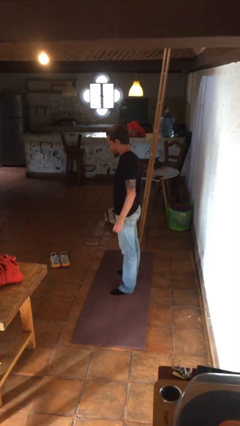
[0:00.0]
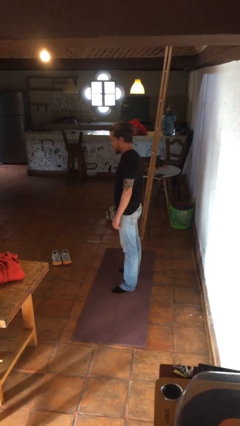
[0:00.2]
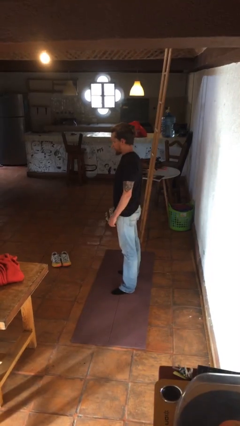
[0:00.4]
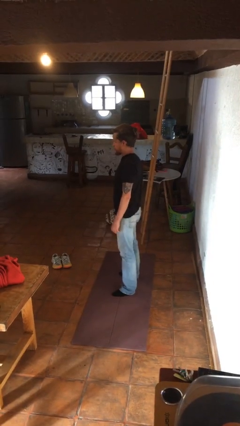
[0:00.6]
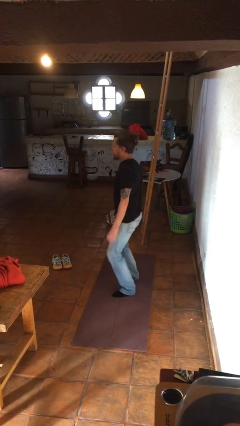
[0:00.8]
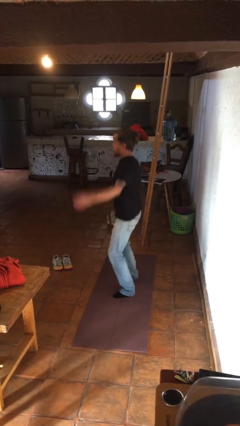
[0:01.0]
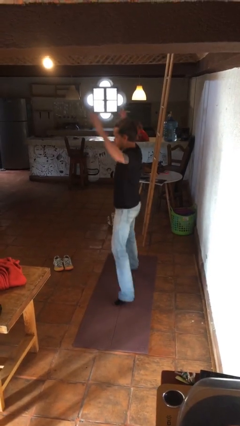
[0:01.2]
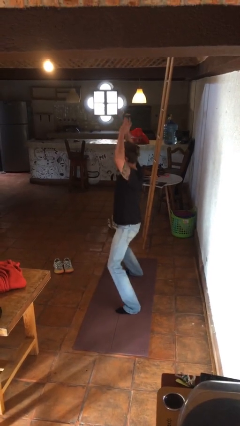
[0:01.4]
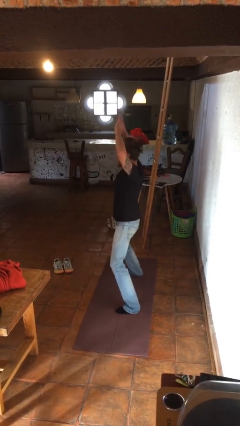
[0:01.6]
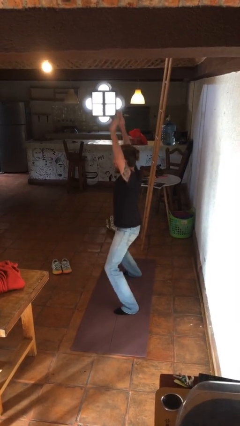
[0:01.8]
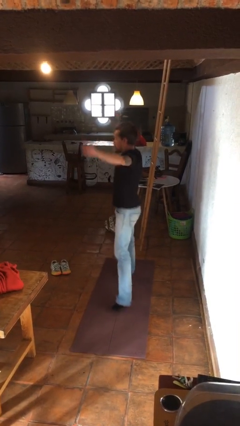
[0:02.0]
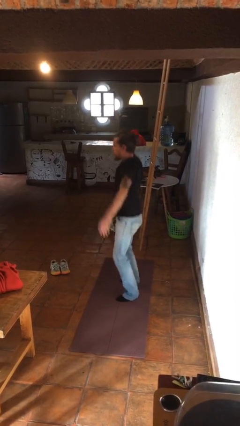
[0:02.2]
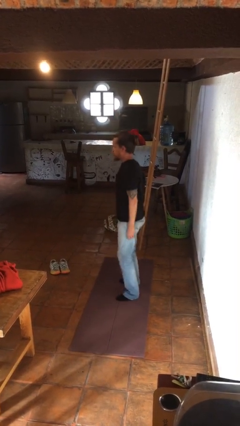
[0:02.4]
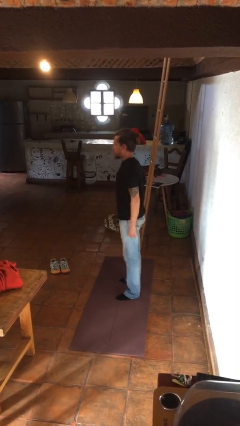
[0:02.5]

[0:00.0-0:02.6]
person exercises with jumping jacks

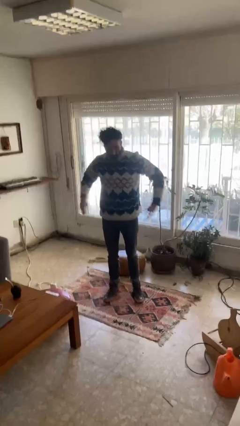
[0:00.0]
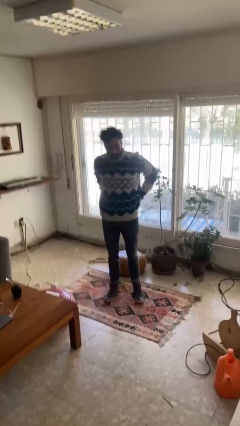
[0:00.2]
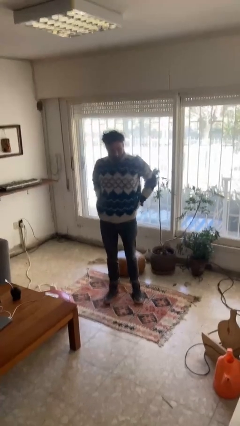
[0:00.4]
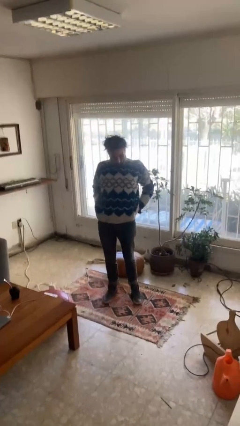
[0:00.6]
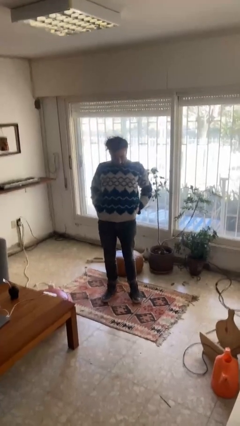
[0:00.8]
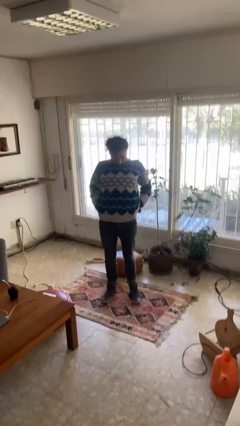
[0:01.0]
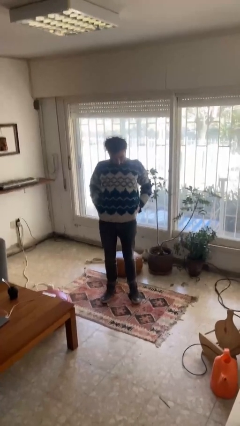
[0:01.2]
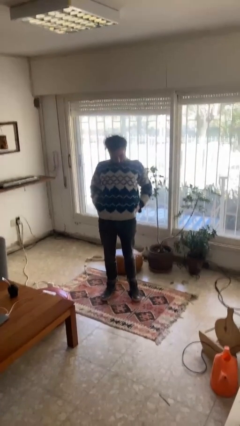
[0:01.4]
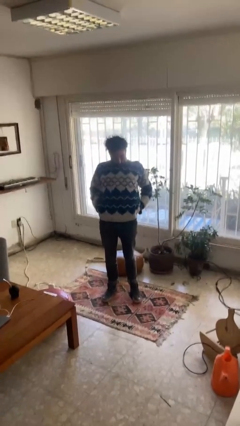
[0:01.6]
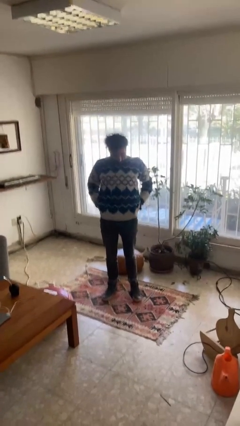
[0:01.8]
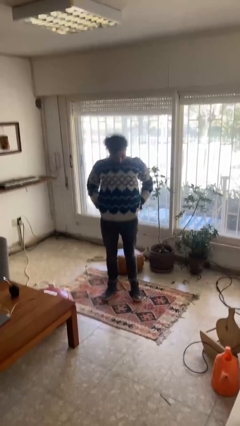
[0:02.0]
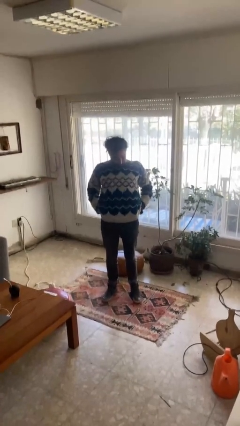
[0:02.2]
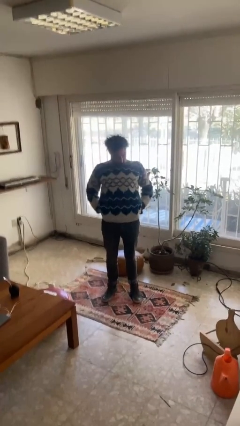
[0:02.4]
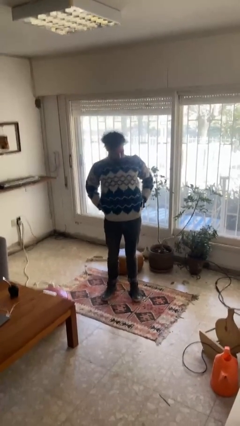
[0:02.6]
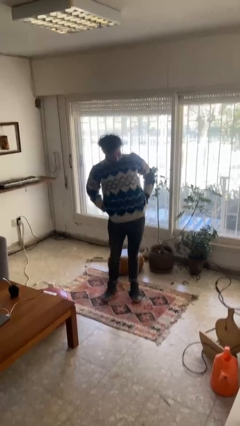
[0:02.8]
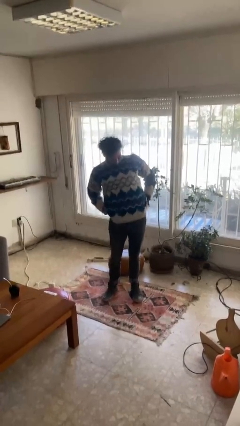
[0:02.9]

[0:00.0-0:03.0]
person stretches back

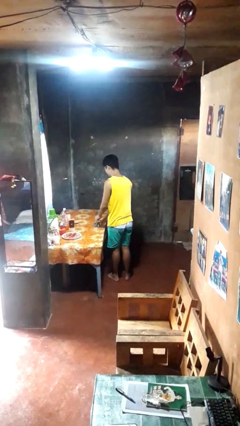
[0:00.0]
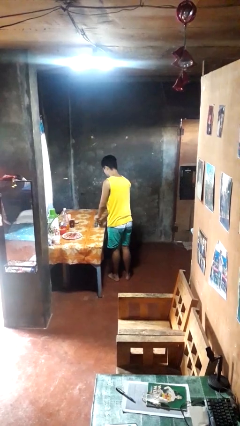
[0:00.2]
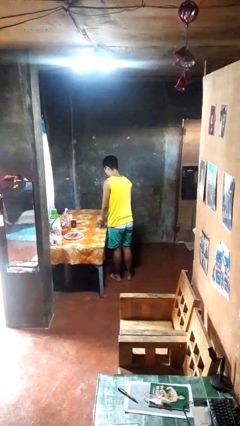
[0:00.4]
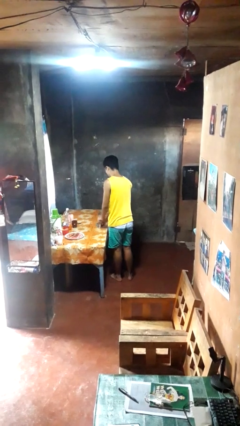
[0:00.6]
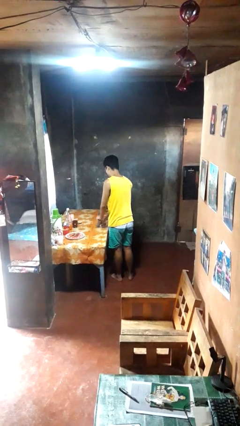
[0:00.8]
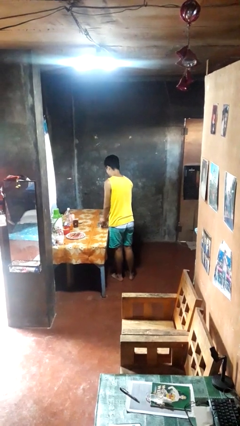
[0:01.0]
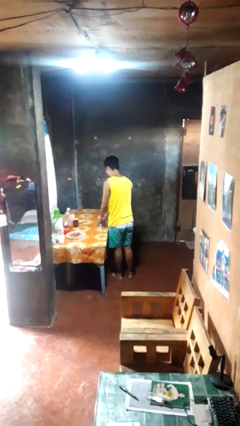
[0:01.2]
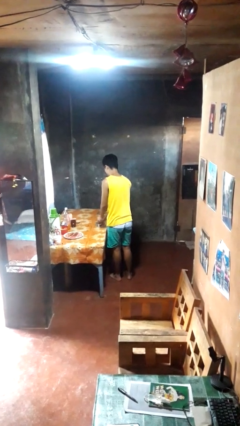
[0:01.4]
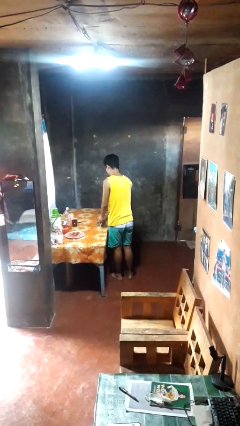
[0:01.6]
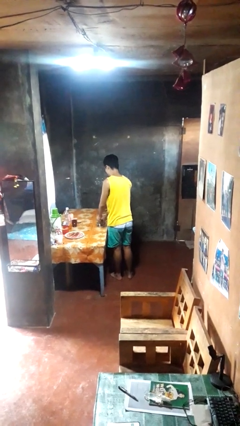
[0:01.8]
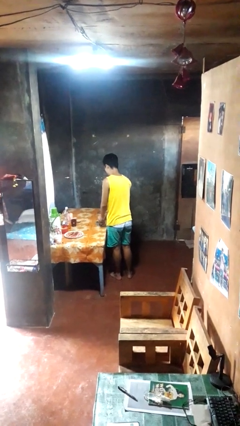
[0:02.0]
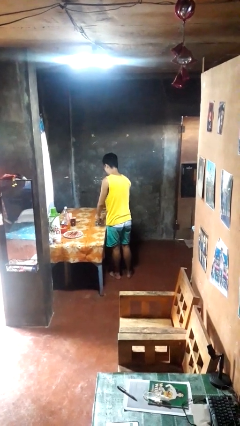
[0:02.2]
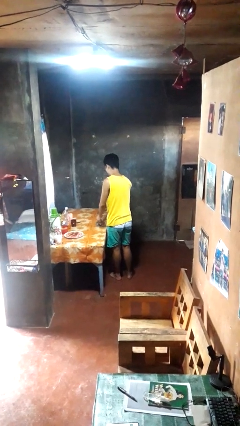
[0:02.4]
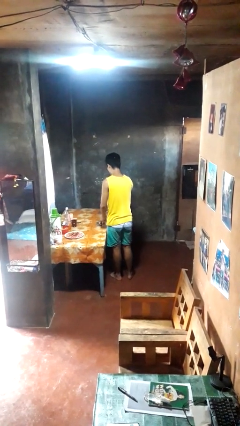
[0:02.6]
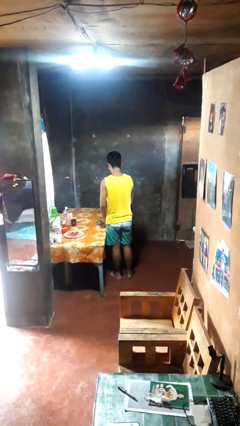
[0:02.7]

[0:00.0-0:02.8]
person opens can with can opener

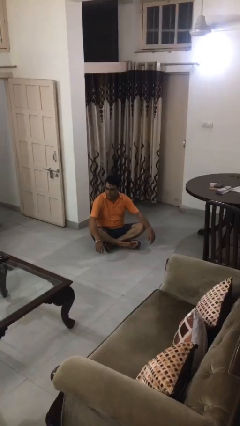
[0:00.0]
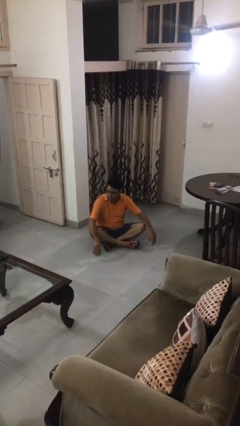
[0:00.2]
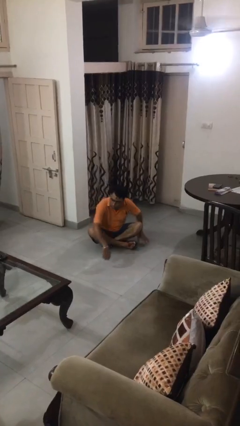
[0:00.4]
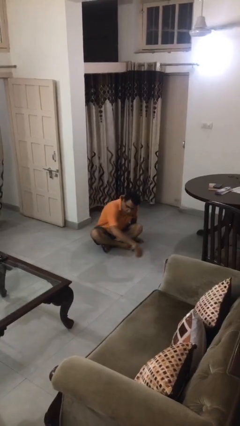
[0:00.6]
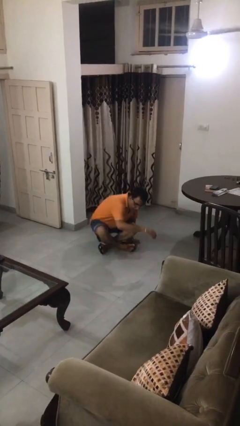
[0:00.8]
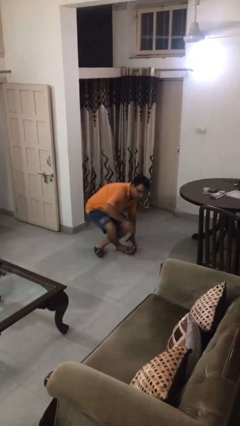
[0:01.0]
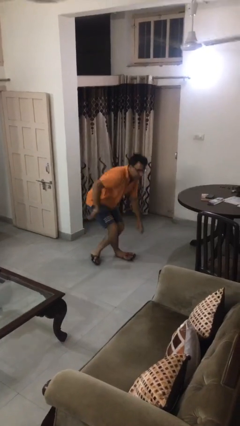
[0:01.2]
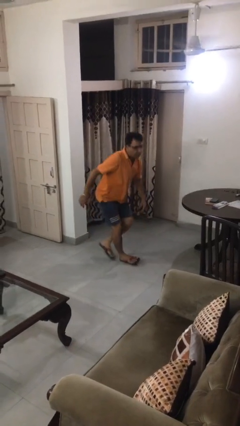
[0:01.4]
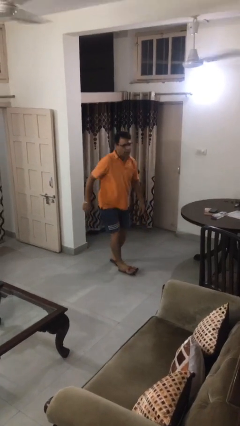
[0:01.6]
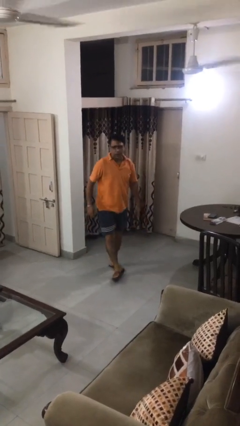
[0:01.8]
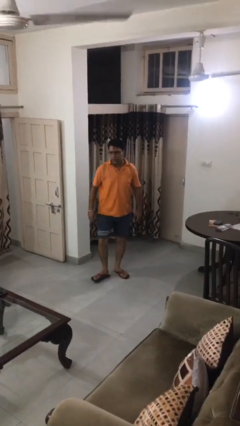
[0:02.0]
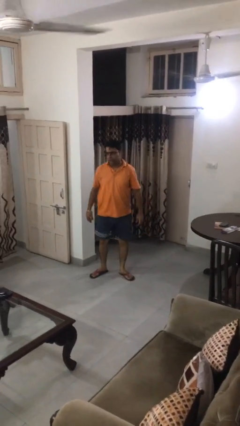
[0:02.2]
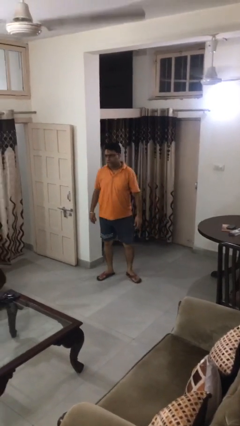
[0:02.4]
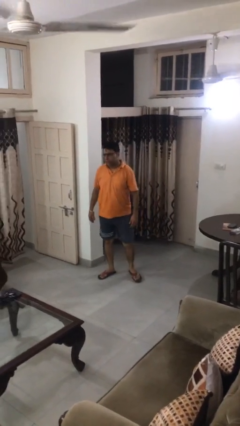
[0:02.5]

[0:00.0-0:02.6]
person stands up from floor

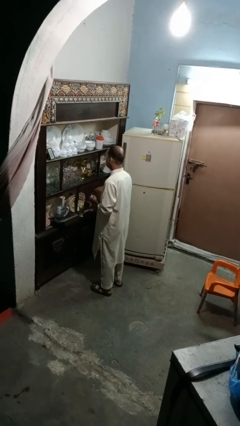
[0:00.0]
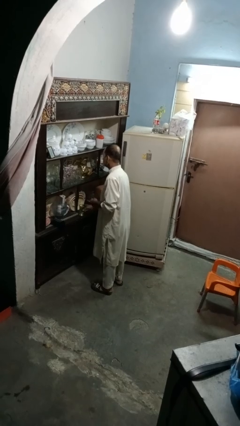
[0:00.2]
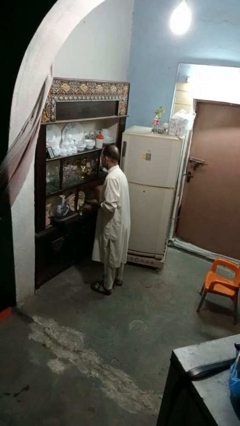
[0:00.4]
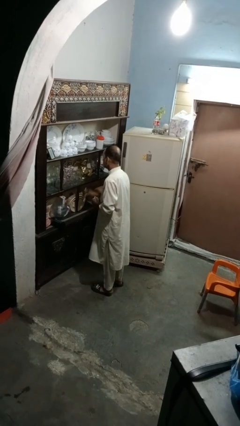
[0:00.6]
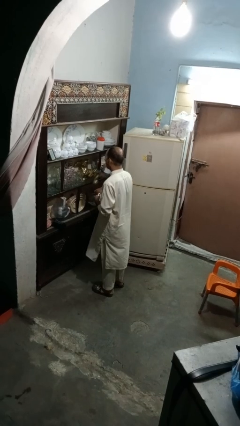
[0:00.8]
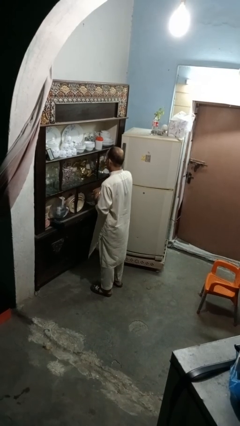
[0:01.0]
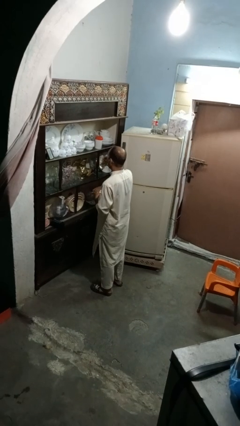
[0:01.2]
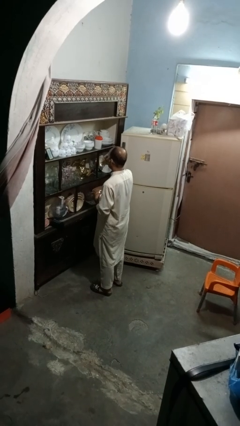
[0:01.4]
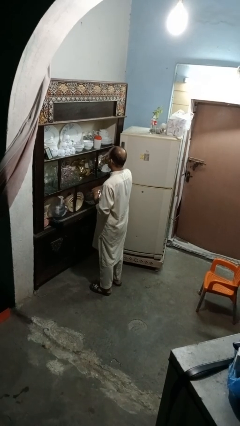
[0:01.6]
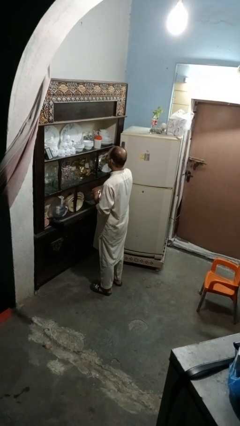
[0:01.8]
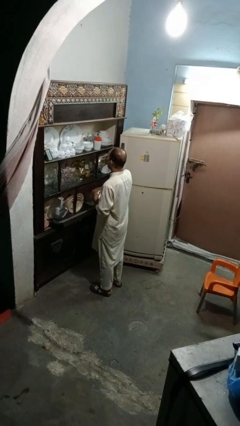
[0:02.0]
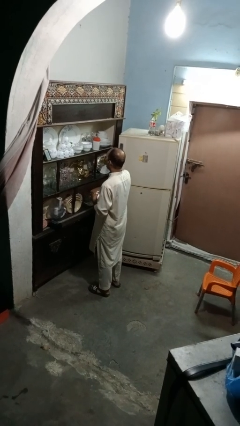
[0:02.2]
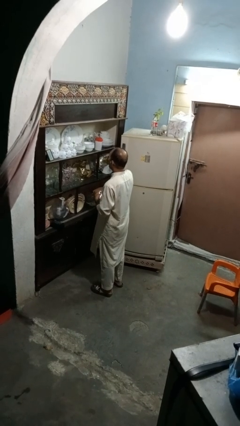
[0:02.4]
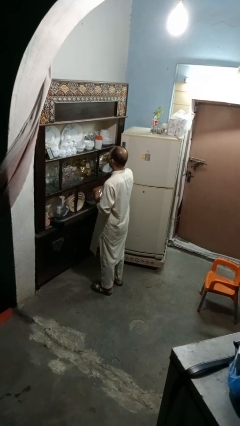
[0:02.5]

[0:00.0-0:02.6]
person drinks from cup

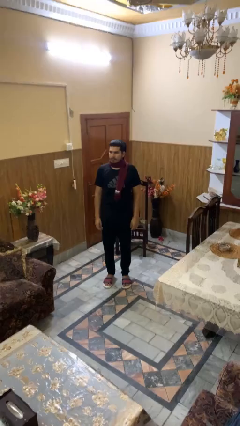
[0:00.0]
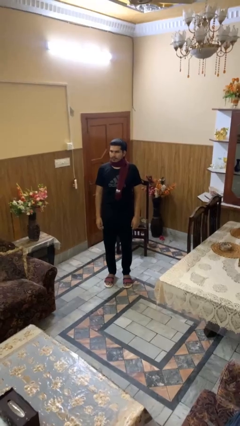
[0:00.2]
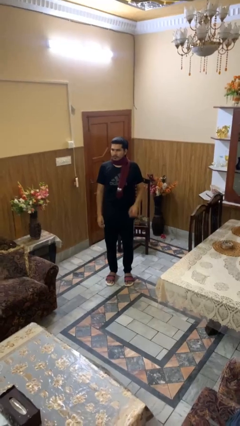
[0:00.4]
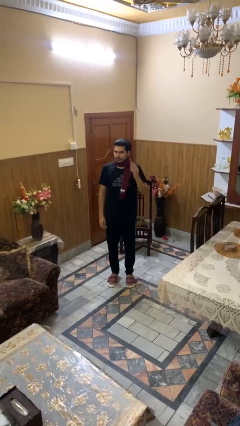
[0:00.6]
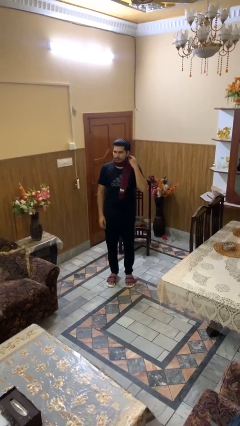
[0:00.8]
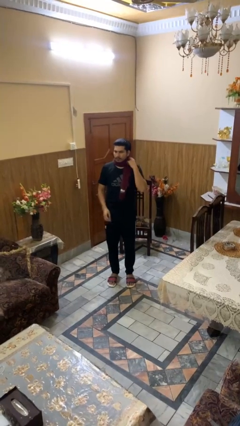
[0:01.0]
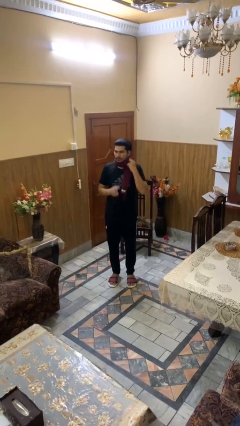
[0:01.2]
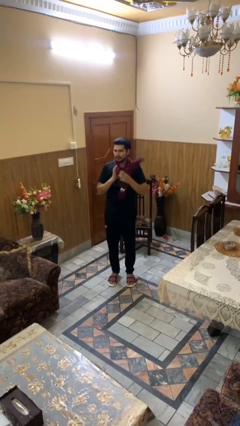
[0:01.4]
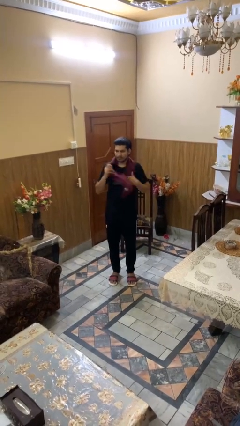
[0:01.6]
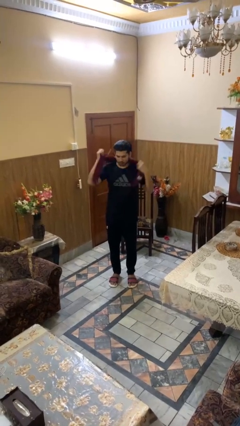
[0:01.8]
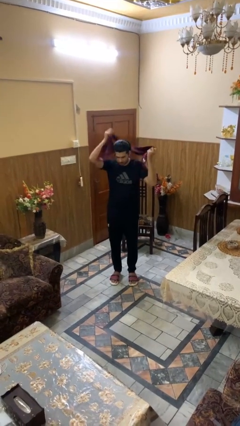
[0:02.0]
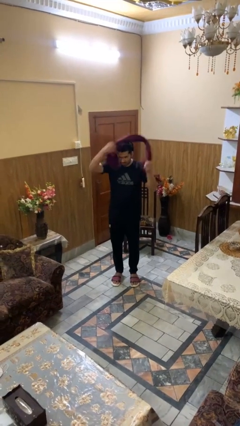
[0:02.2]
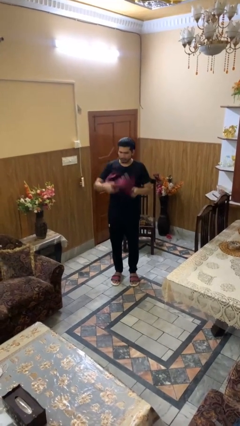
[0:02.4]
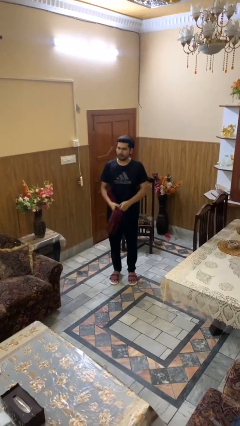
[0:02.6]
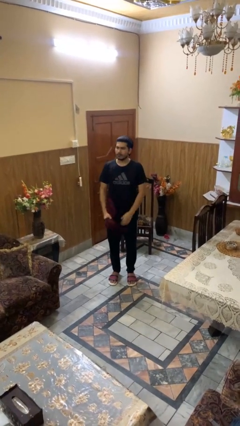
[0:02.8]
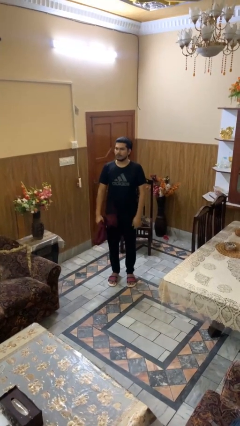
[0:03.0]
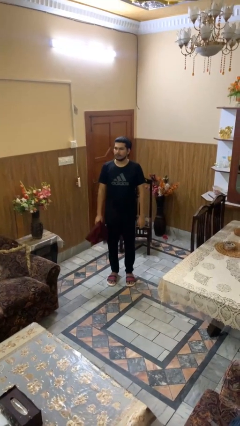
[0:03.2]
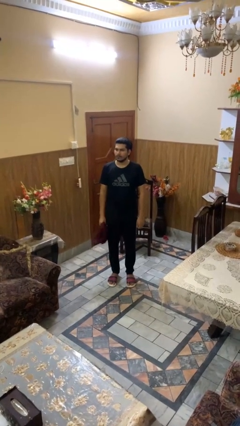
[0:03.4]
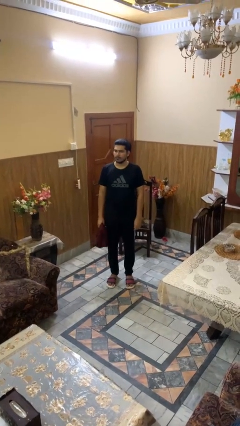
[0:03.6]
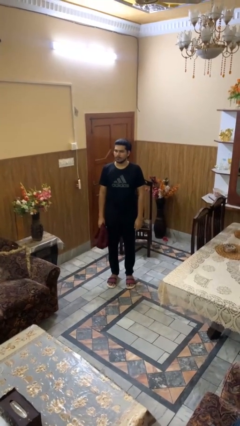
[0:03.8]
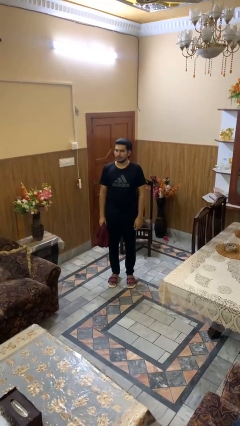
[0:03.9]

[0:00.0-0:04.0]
person takes off scarf

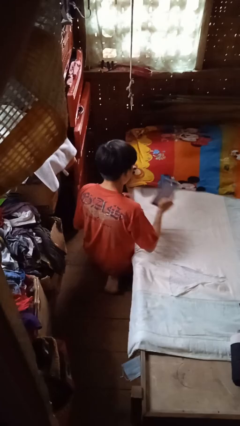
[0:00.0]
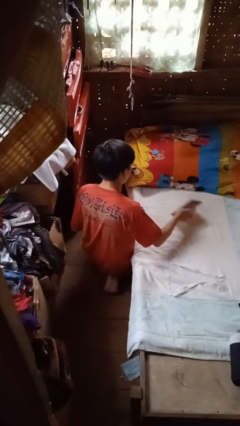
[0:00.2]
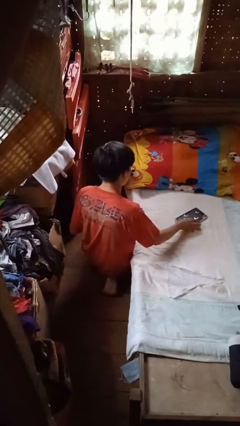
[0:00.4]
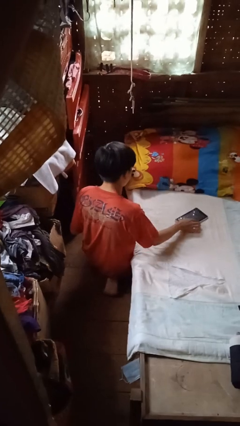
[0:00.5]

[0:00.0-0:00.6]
person puts down object on bed
